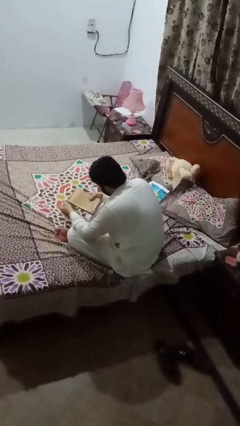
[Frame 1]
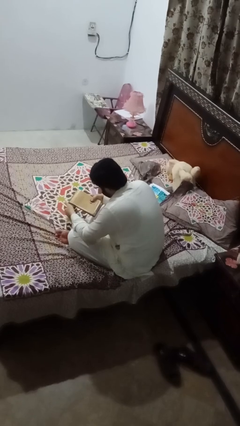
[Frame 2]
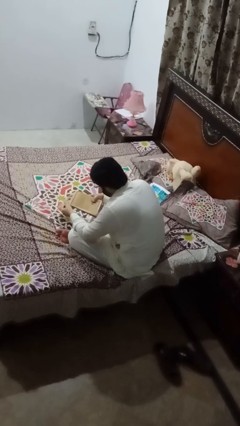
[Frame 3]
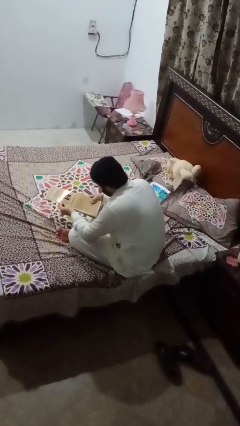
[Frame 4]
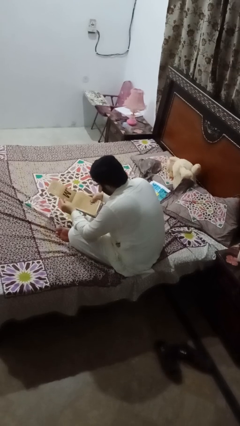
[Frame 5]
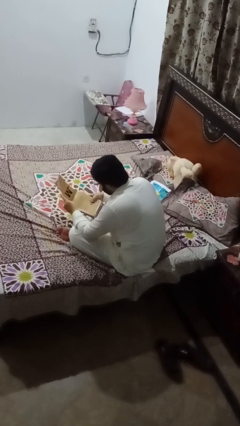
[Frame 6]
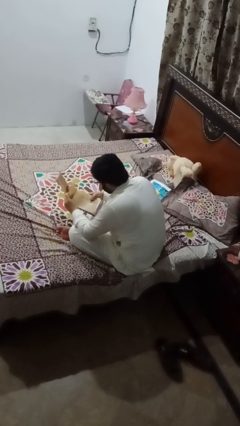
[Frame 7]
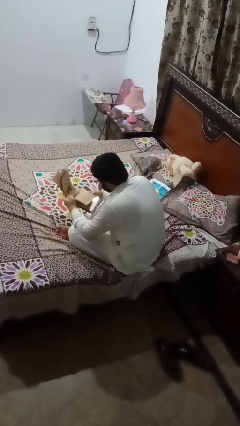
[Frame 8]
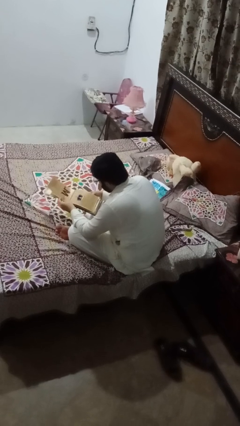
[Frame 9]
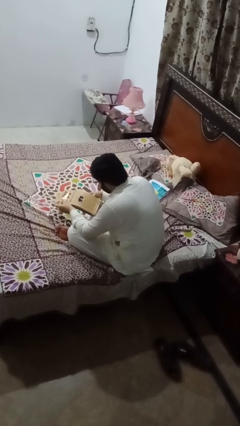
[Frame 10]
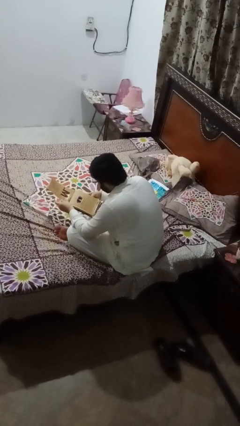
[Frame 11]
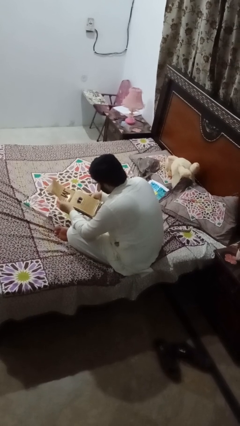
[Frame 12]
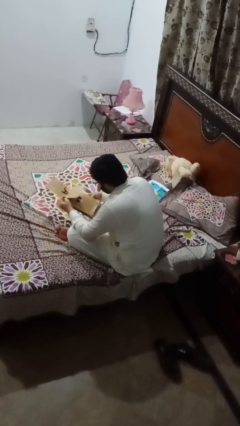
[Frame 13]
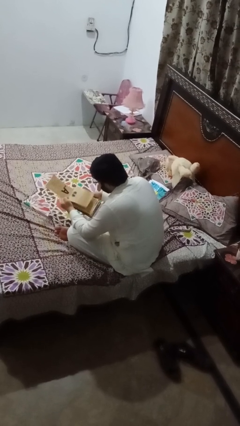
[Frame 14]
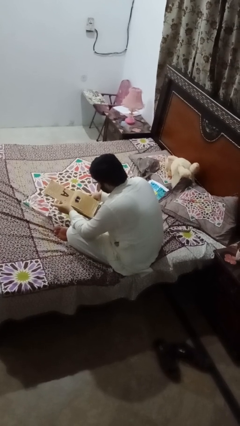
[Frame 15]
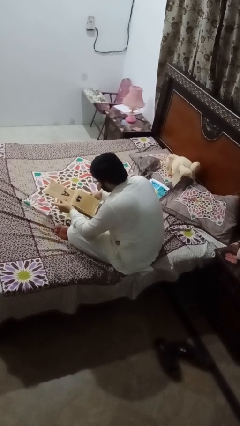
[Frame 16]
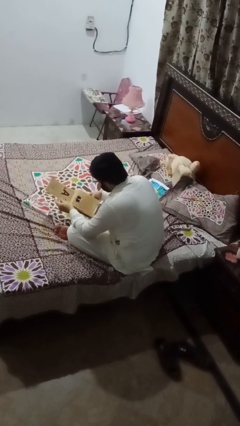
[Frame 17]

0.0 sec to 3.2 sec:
person reads magazine

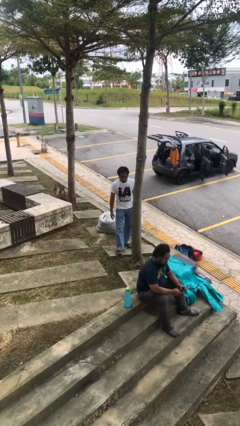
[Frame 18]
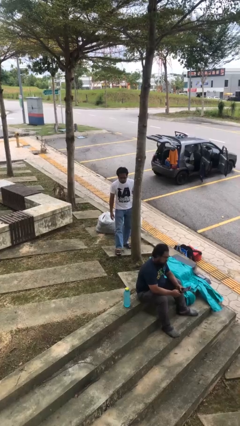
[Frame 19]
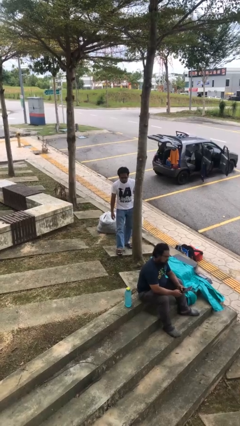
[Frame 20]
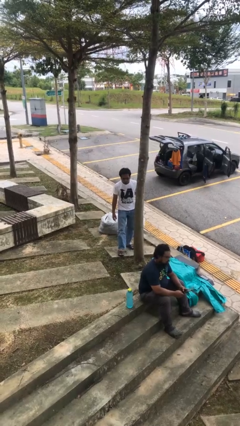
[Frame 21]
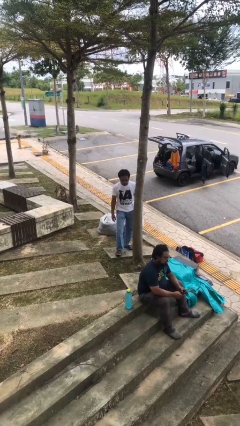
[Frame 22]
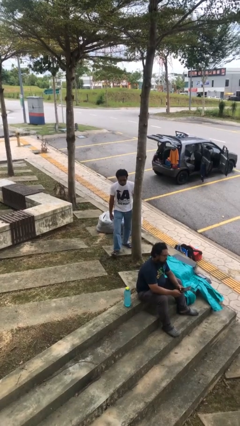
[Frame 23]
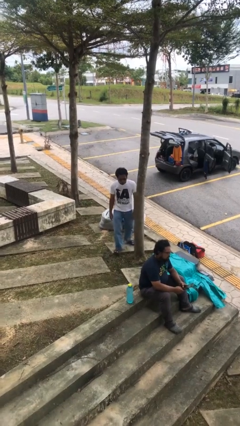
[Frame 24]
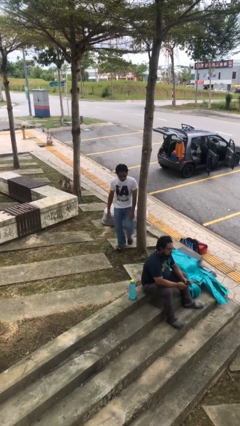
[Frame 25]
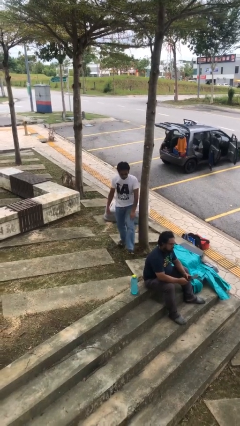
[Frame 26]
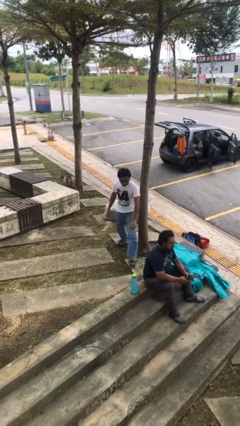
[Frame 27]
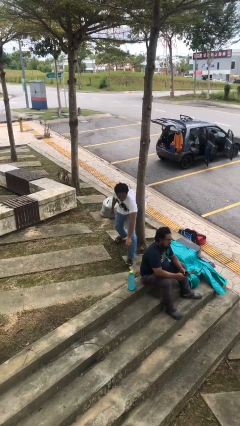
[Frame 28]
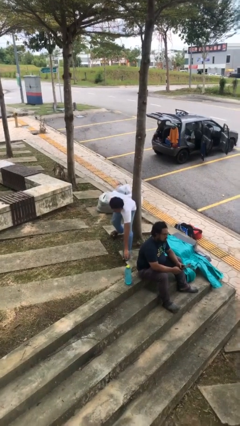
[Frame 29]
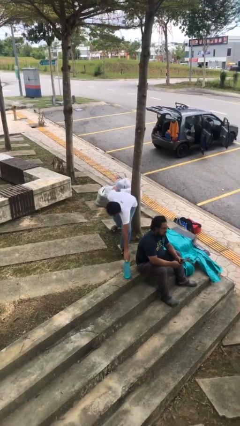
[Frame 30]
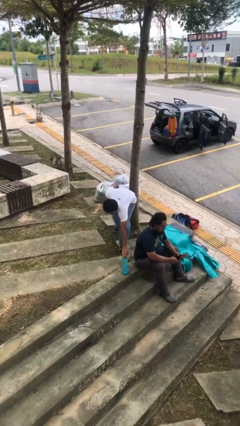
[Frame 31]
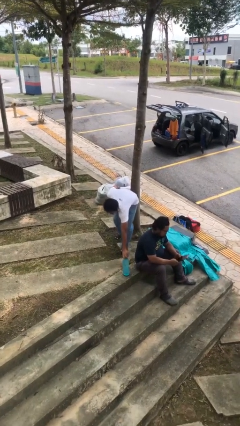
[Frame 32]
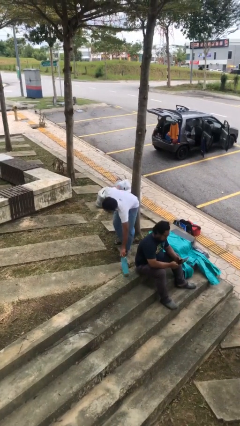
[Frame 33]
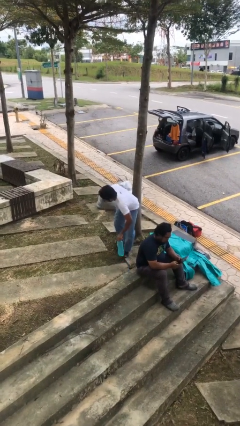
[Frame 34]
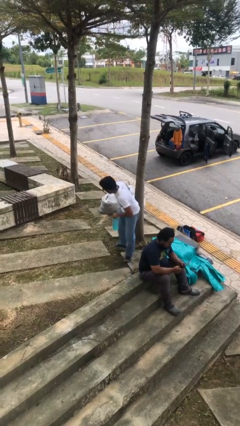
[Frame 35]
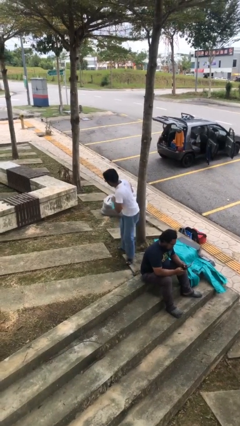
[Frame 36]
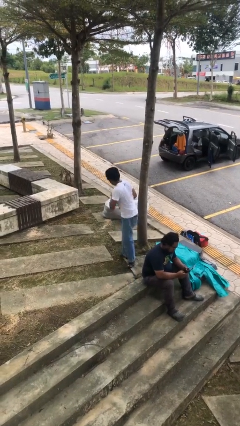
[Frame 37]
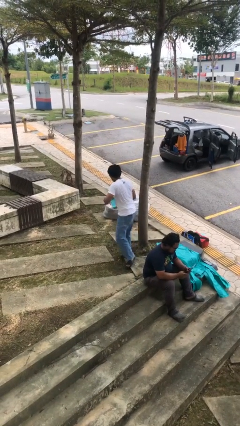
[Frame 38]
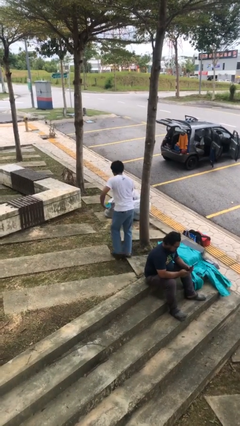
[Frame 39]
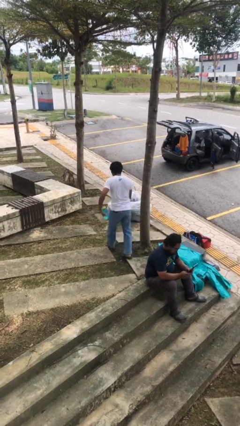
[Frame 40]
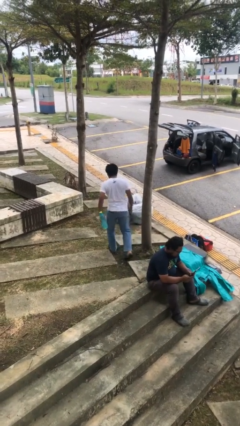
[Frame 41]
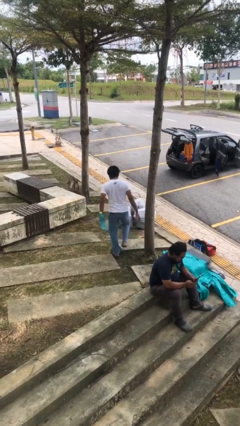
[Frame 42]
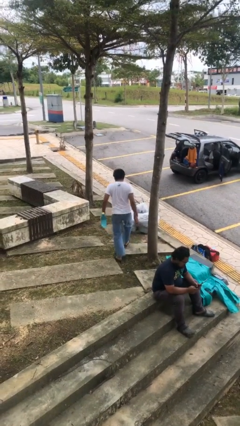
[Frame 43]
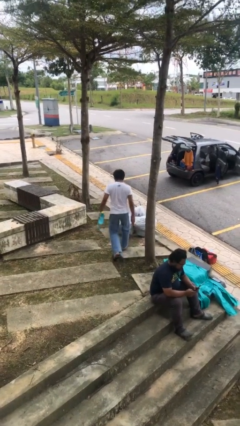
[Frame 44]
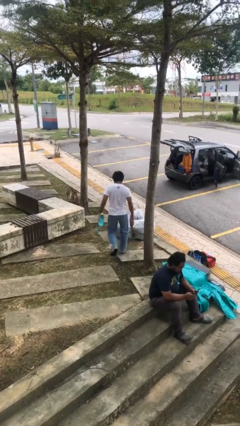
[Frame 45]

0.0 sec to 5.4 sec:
person steals object from person

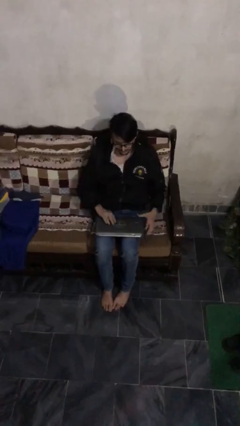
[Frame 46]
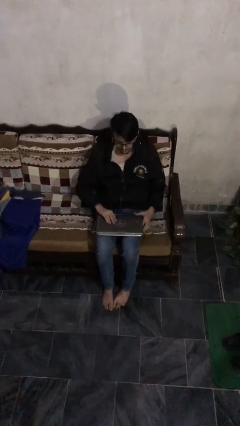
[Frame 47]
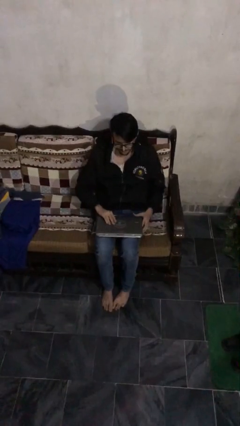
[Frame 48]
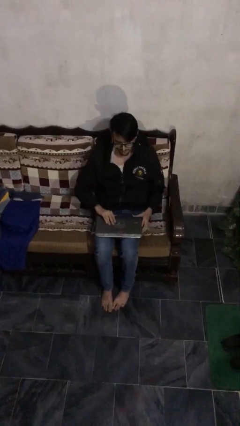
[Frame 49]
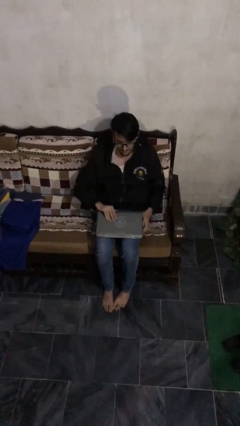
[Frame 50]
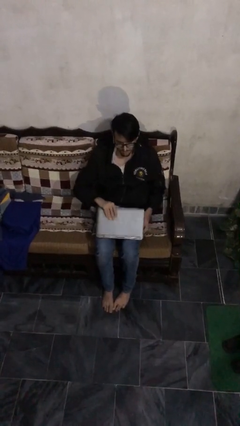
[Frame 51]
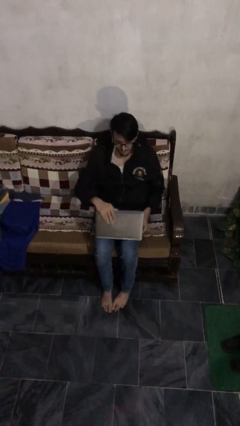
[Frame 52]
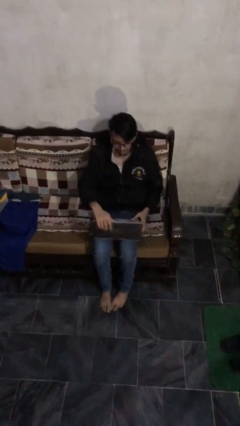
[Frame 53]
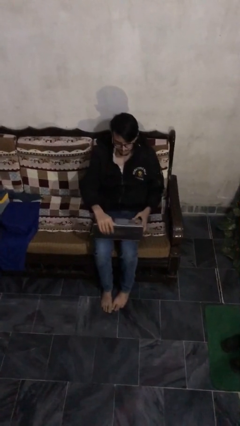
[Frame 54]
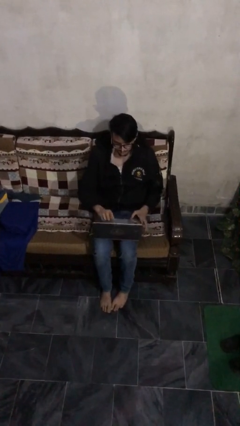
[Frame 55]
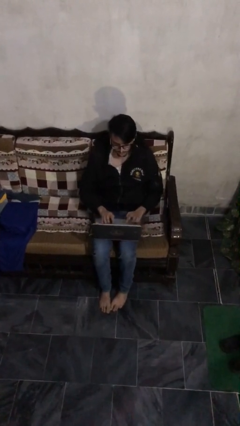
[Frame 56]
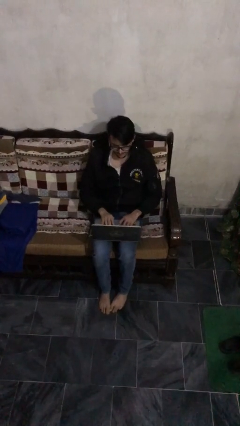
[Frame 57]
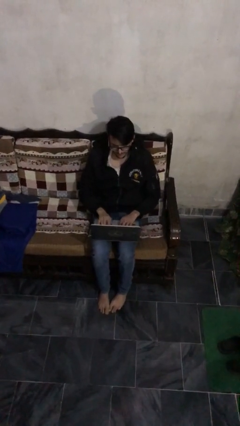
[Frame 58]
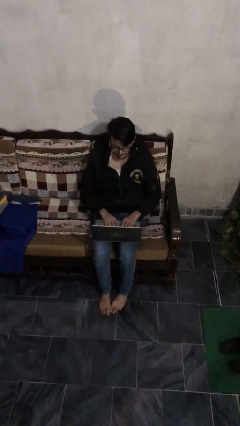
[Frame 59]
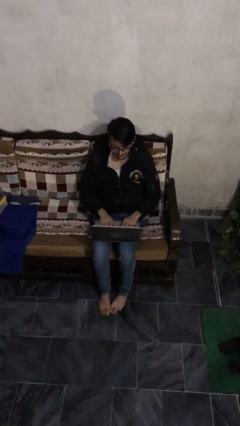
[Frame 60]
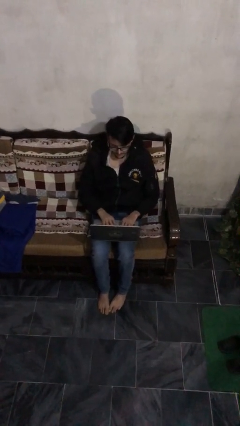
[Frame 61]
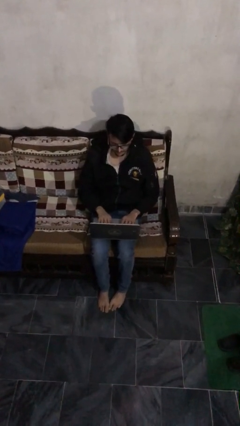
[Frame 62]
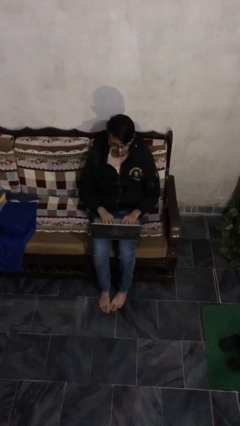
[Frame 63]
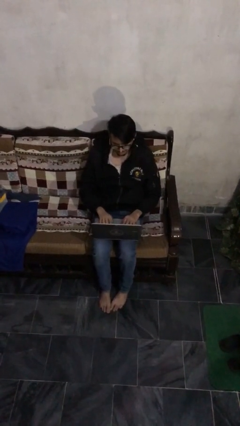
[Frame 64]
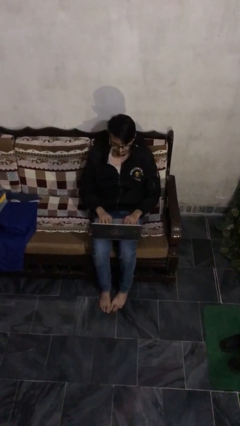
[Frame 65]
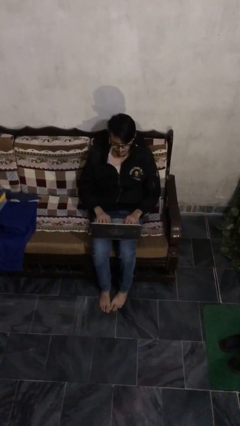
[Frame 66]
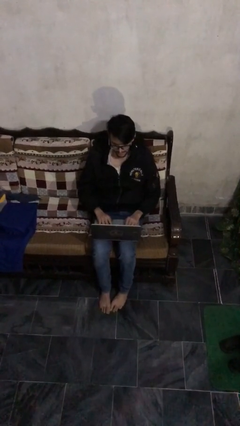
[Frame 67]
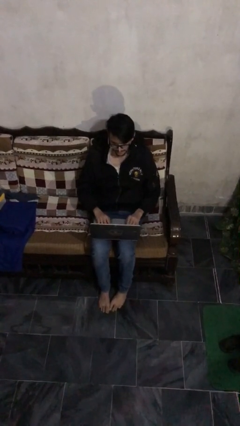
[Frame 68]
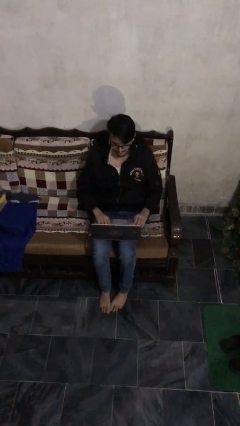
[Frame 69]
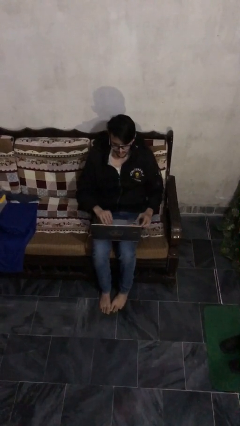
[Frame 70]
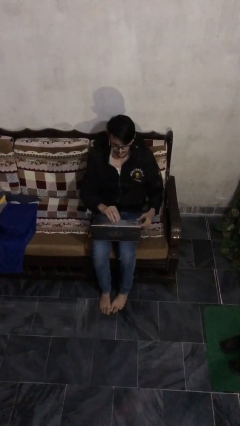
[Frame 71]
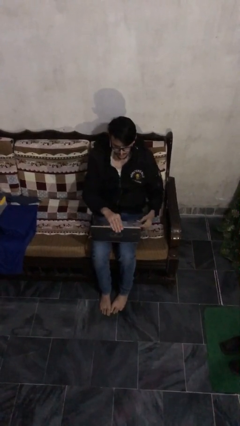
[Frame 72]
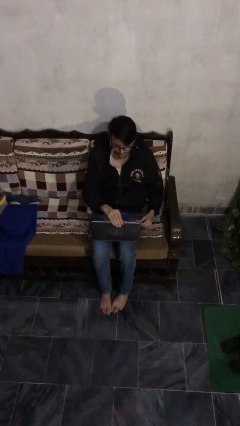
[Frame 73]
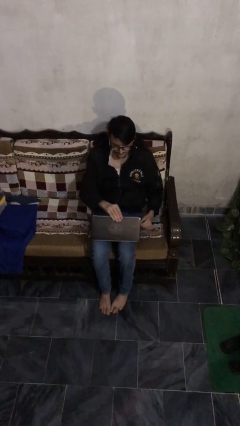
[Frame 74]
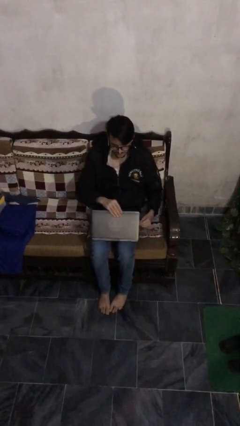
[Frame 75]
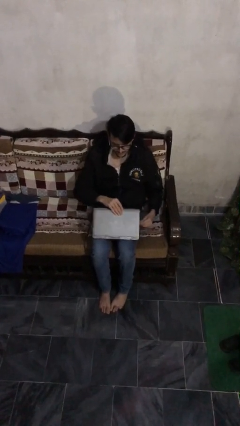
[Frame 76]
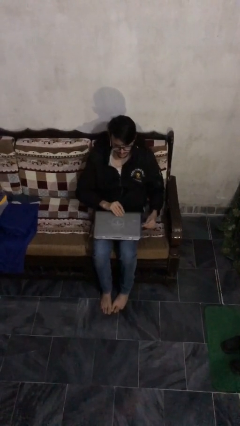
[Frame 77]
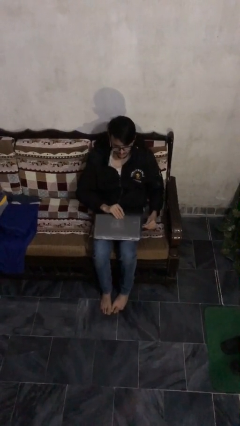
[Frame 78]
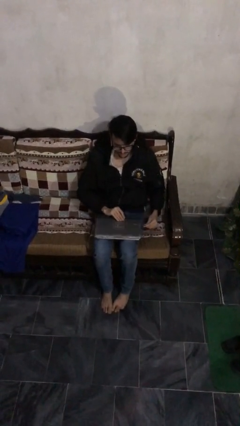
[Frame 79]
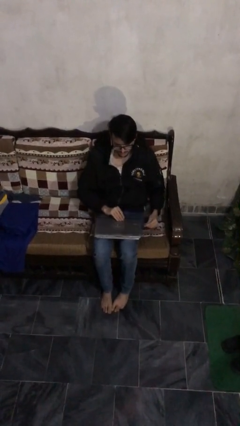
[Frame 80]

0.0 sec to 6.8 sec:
person interacts with laptop

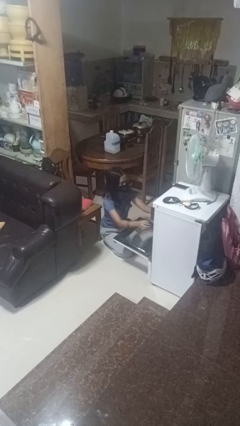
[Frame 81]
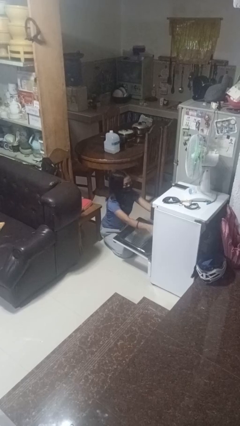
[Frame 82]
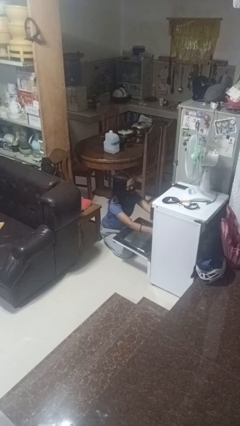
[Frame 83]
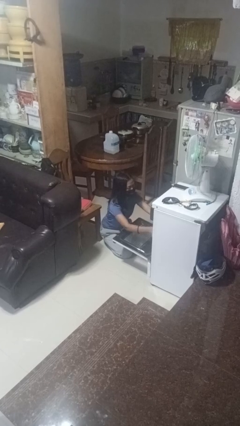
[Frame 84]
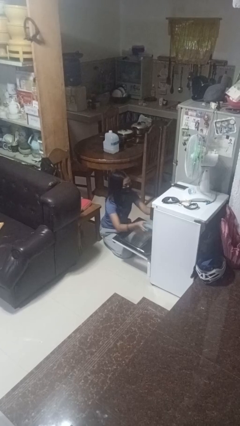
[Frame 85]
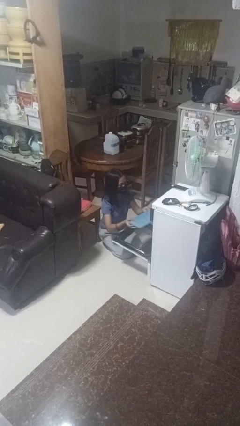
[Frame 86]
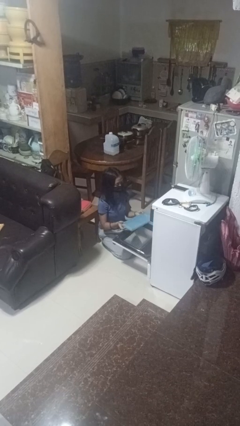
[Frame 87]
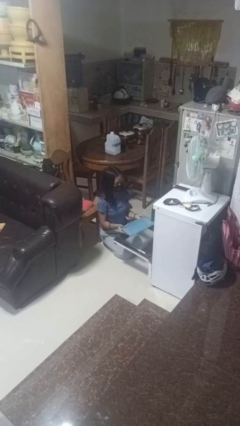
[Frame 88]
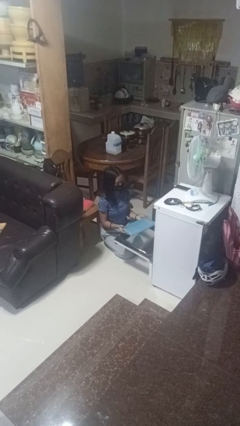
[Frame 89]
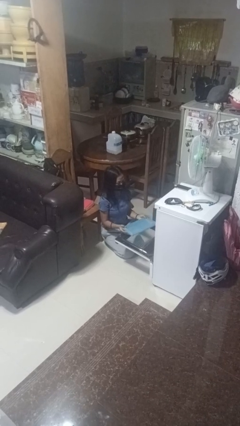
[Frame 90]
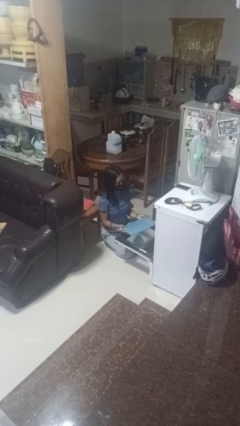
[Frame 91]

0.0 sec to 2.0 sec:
person takes object from oven

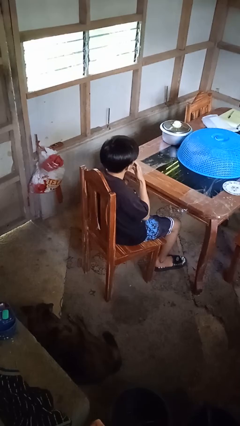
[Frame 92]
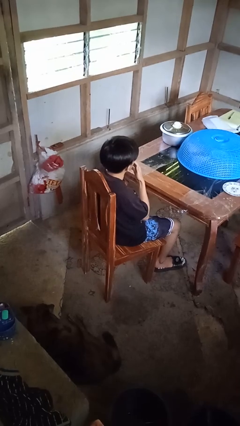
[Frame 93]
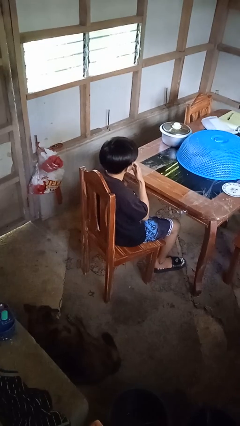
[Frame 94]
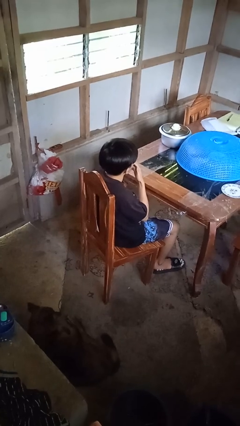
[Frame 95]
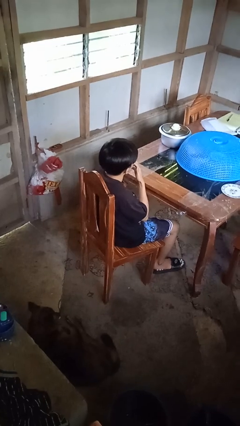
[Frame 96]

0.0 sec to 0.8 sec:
person licks fingers
